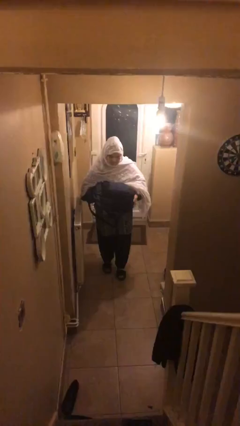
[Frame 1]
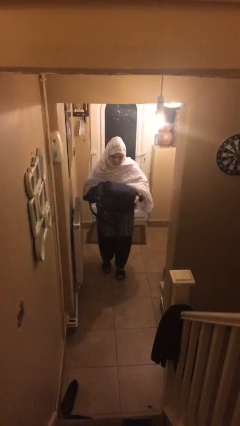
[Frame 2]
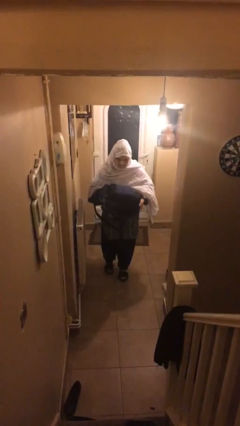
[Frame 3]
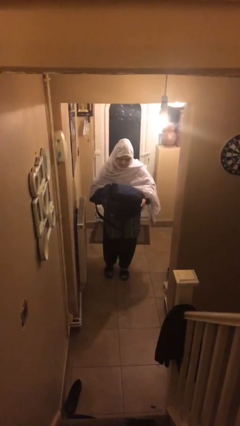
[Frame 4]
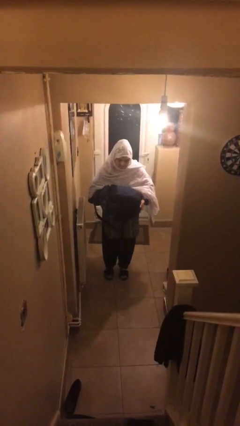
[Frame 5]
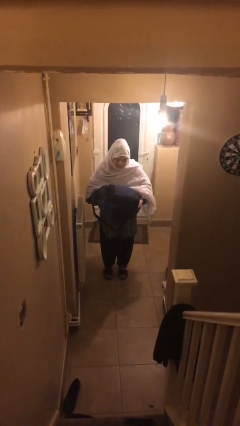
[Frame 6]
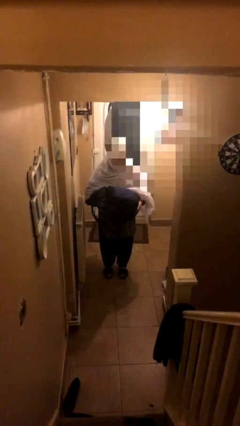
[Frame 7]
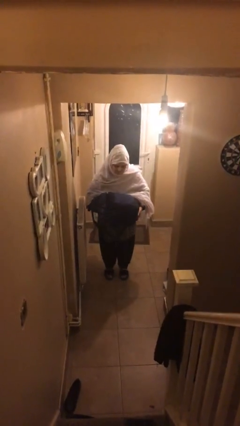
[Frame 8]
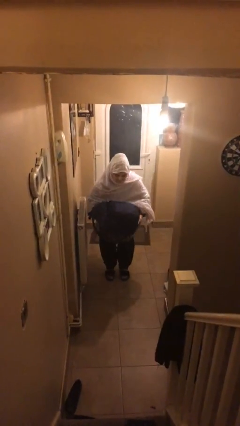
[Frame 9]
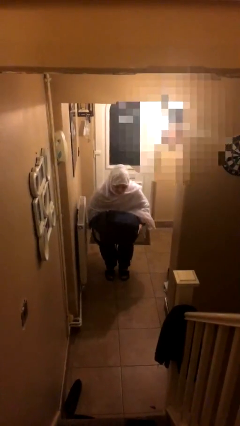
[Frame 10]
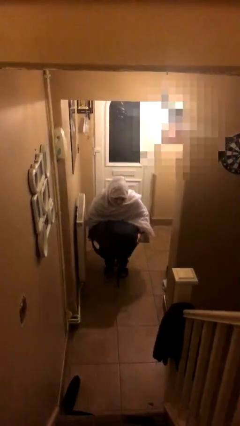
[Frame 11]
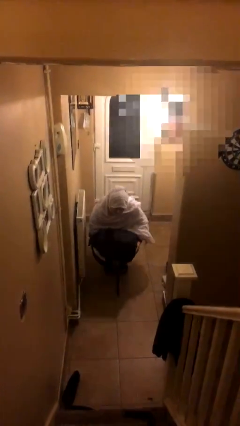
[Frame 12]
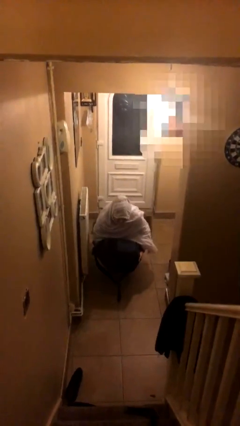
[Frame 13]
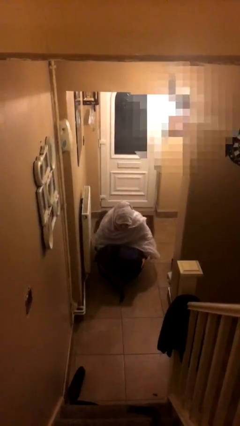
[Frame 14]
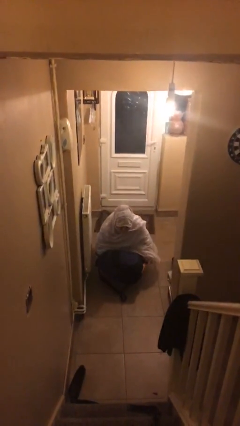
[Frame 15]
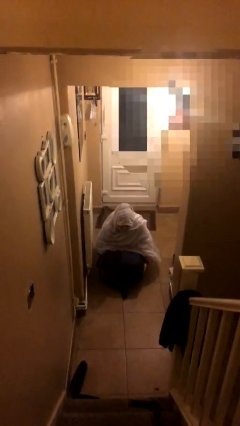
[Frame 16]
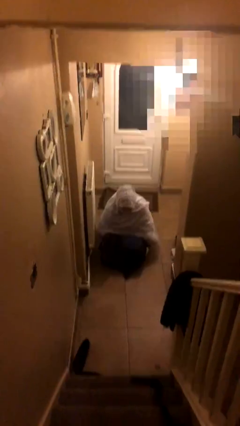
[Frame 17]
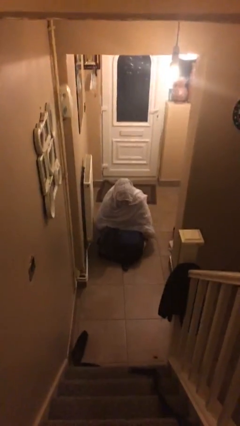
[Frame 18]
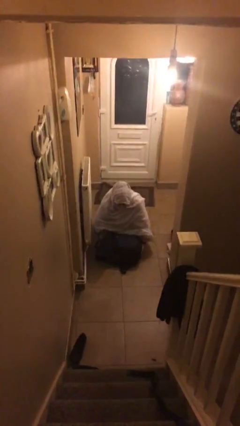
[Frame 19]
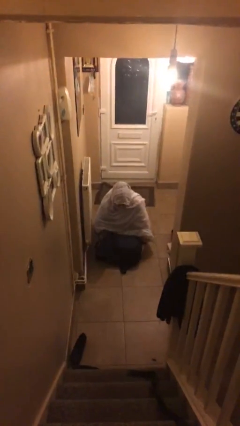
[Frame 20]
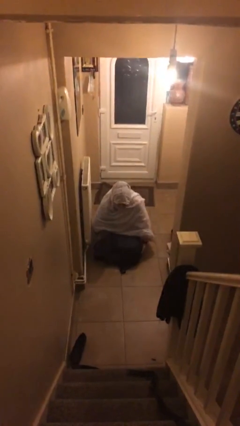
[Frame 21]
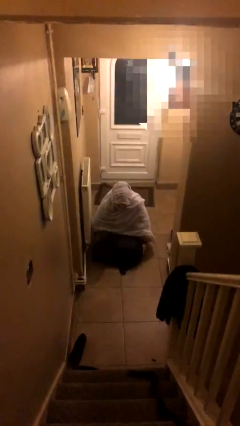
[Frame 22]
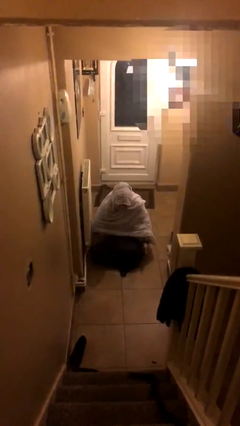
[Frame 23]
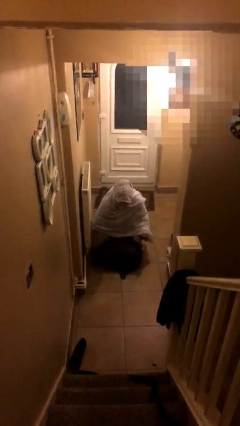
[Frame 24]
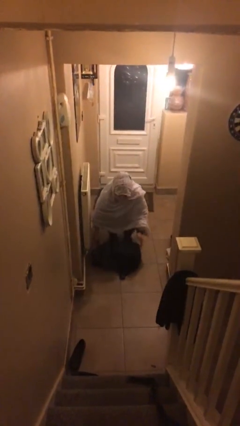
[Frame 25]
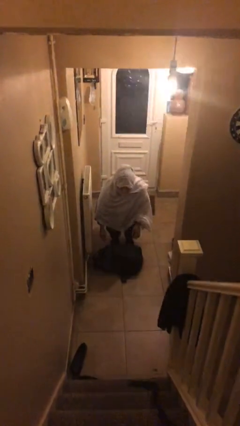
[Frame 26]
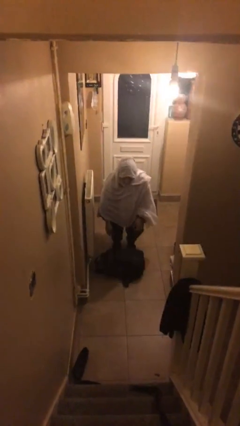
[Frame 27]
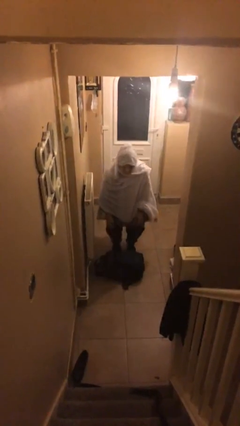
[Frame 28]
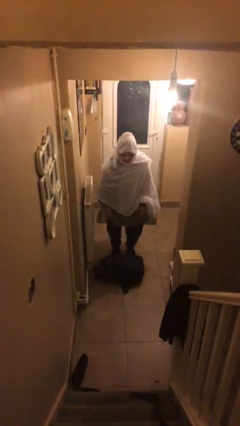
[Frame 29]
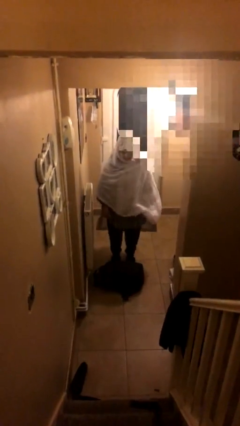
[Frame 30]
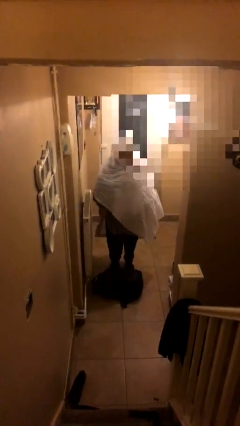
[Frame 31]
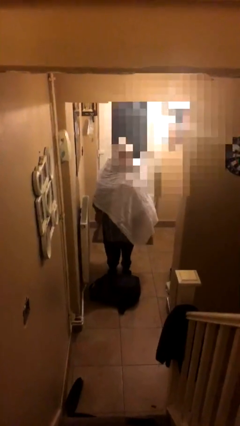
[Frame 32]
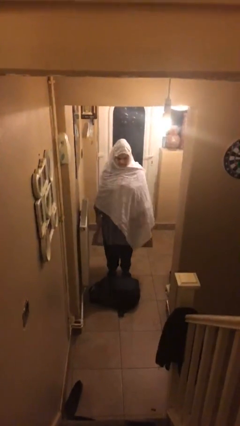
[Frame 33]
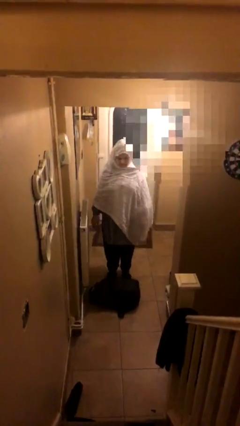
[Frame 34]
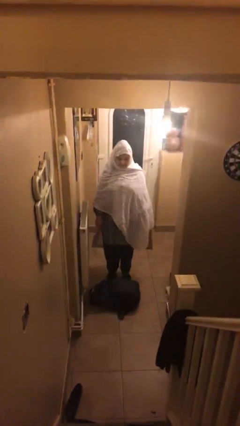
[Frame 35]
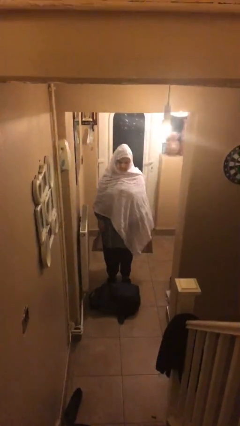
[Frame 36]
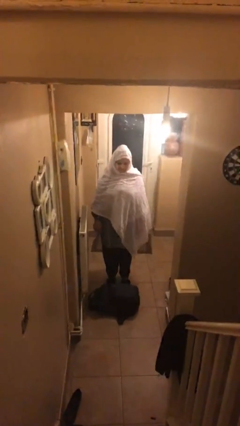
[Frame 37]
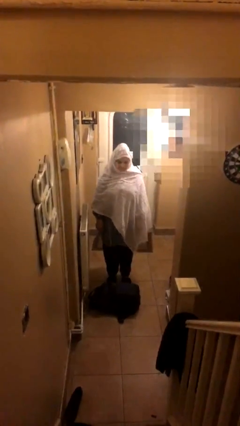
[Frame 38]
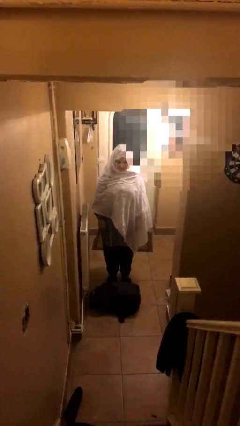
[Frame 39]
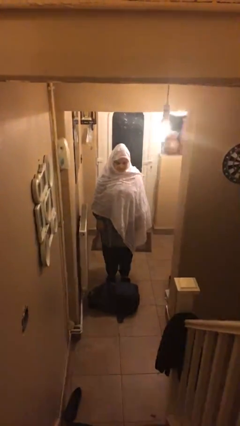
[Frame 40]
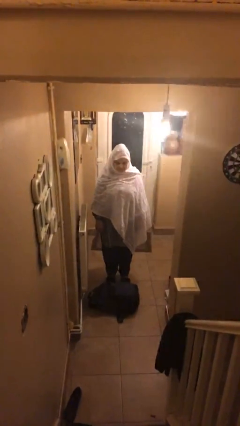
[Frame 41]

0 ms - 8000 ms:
person puts down object on floor

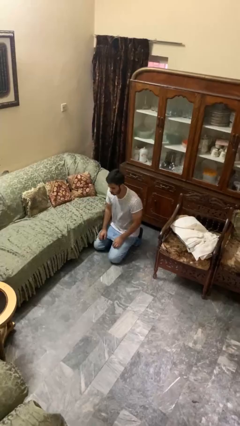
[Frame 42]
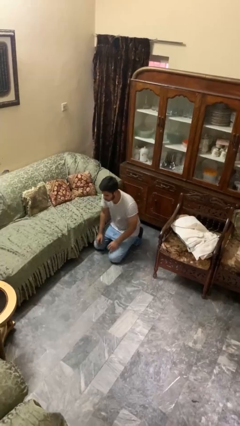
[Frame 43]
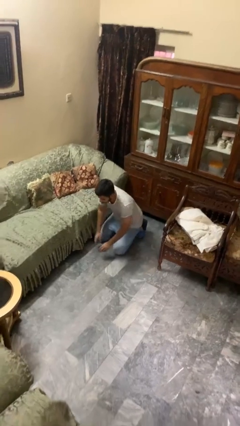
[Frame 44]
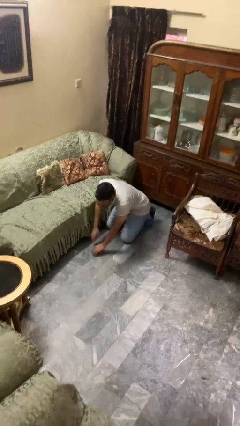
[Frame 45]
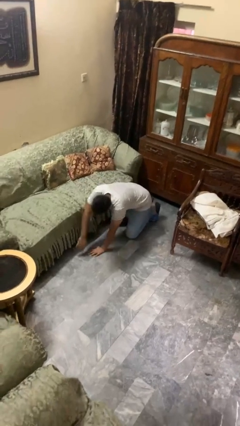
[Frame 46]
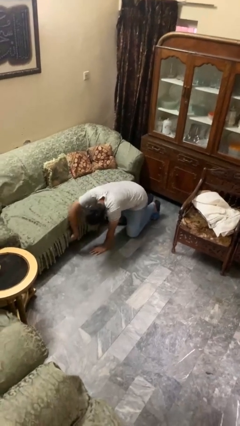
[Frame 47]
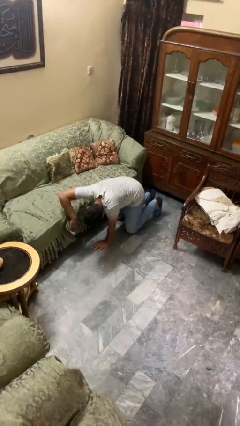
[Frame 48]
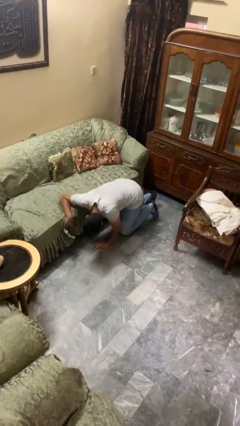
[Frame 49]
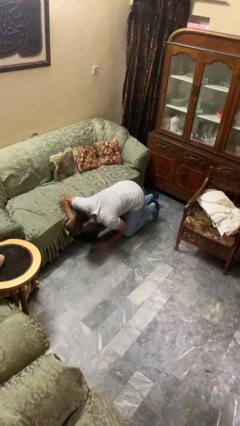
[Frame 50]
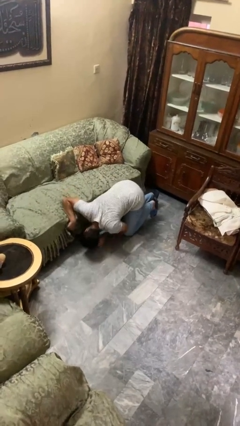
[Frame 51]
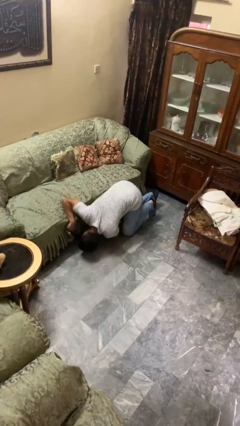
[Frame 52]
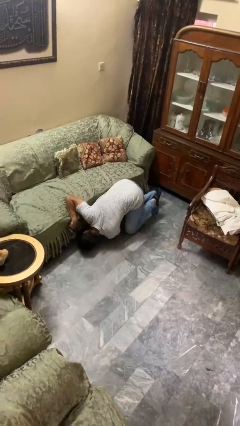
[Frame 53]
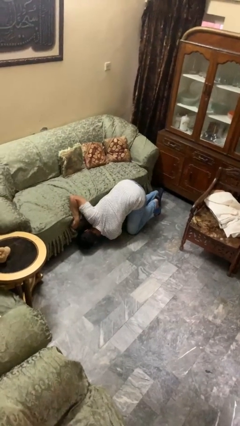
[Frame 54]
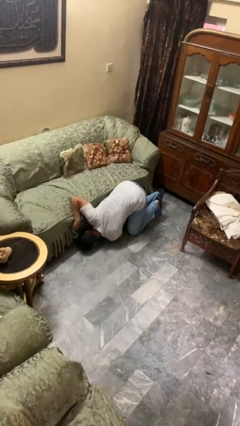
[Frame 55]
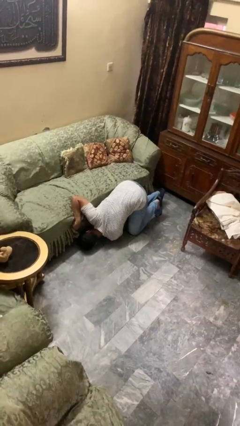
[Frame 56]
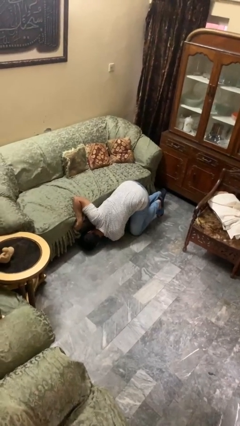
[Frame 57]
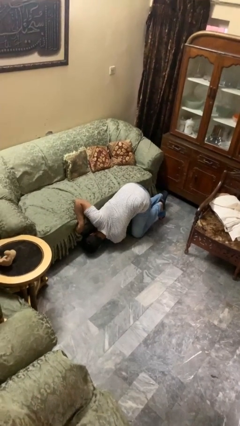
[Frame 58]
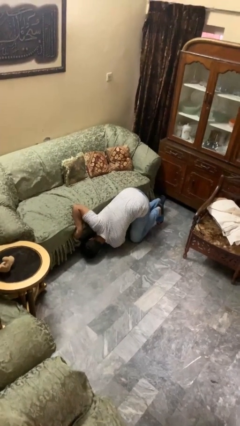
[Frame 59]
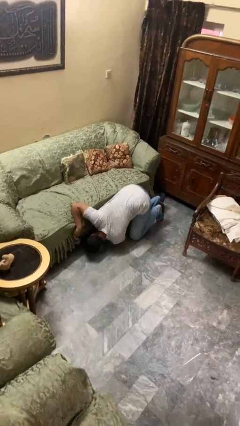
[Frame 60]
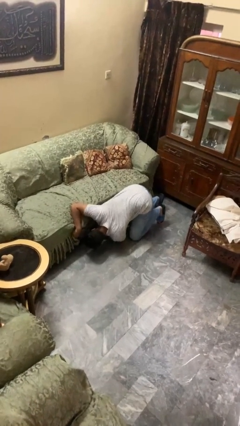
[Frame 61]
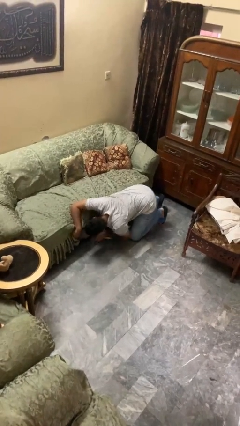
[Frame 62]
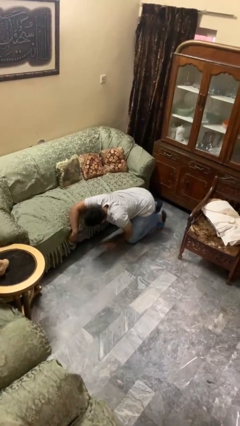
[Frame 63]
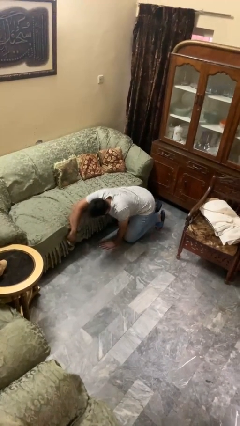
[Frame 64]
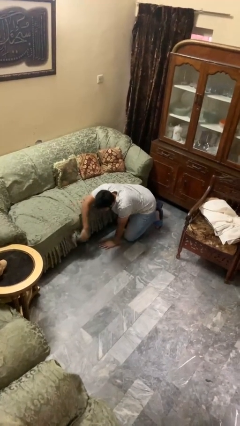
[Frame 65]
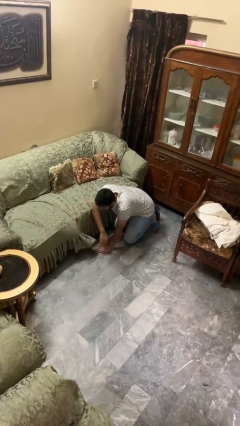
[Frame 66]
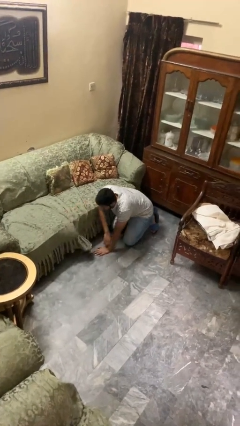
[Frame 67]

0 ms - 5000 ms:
person searches under couch

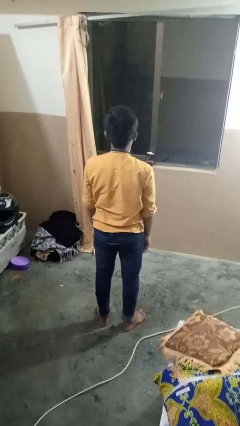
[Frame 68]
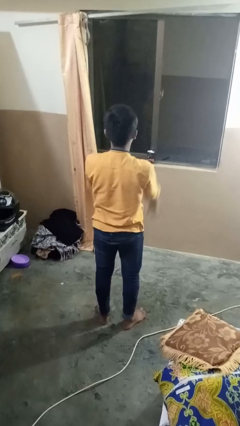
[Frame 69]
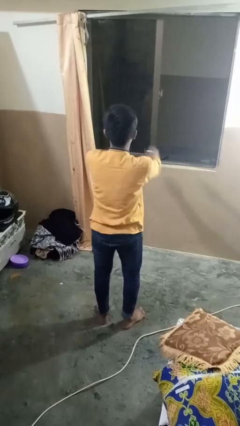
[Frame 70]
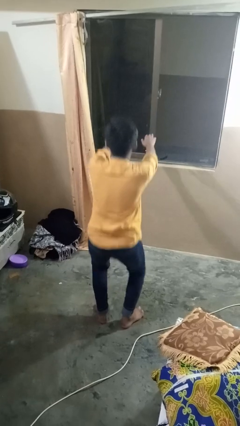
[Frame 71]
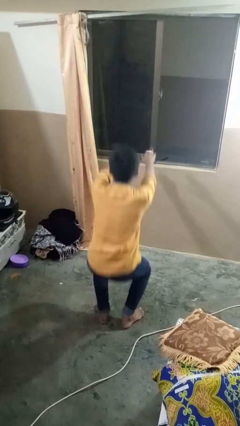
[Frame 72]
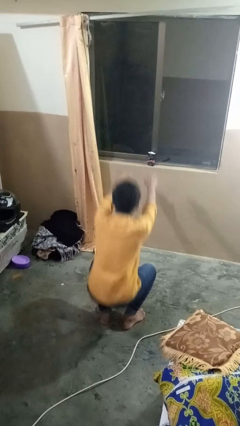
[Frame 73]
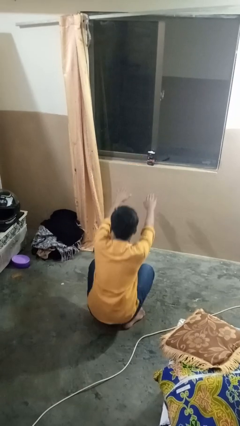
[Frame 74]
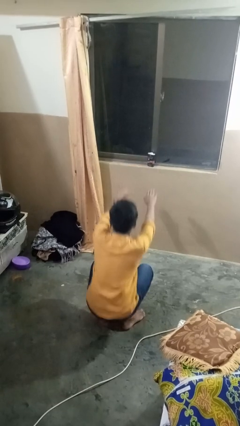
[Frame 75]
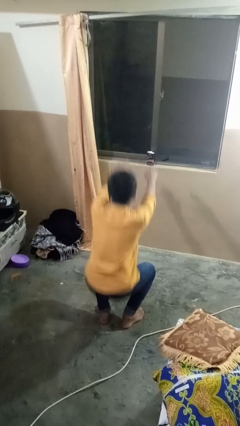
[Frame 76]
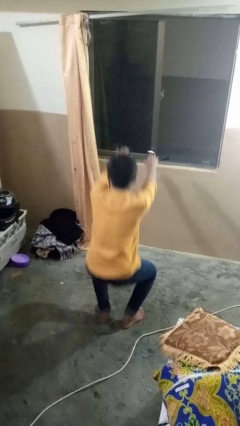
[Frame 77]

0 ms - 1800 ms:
person squats

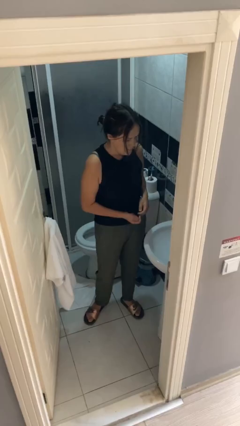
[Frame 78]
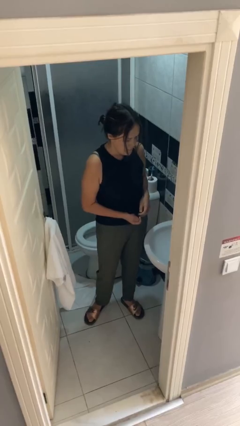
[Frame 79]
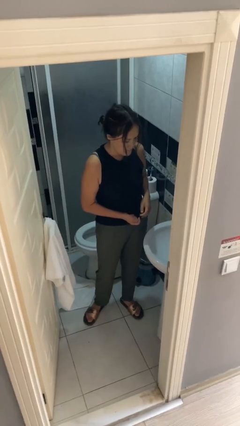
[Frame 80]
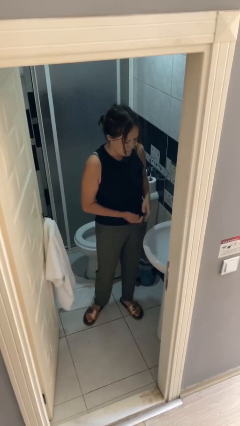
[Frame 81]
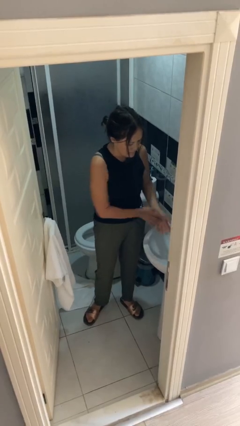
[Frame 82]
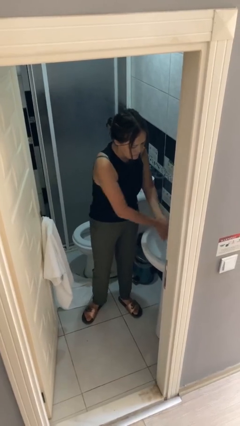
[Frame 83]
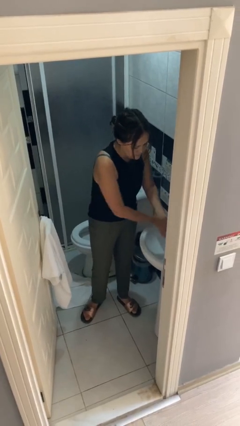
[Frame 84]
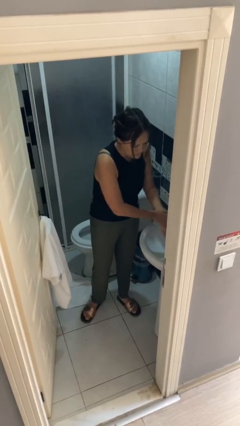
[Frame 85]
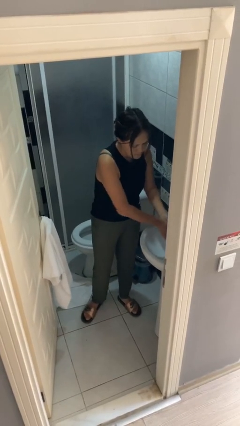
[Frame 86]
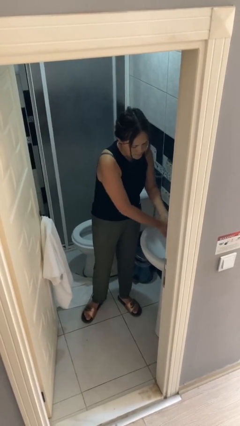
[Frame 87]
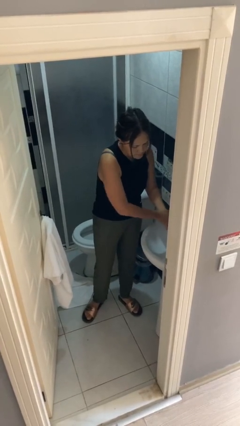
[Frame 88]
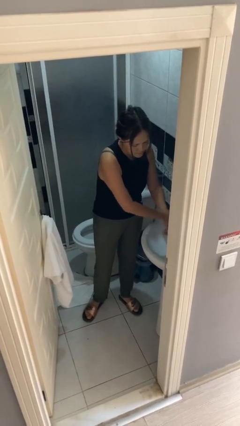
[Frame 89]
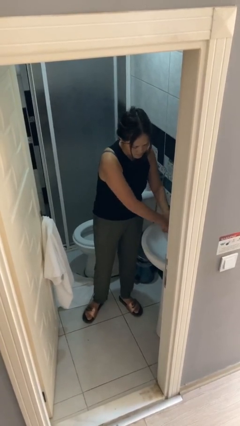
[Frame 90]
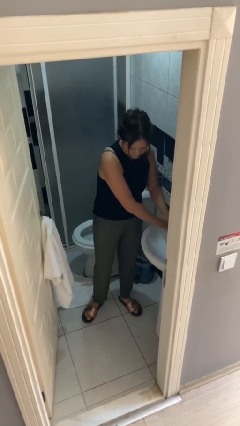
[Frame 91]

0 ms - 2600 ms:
person washes hands

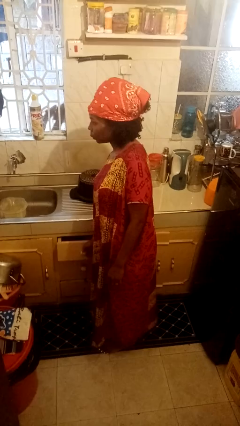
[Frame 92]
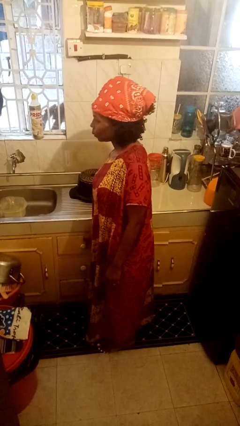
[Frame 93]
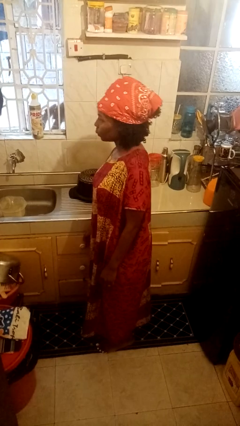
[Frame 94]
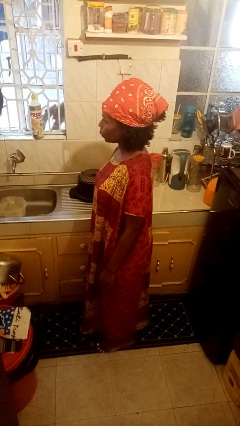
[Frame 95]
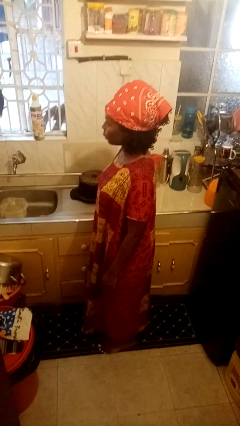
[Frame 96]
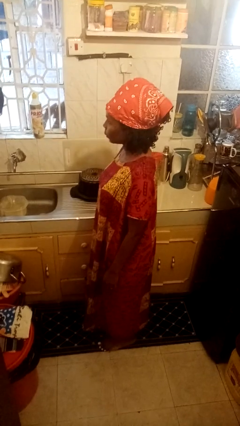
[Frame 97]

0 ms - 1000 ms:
person closes kitchen drawer
